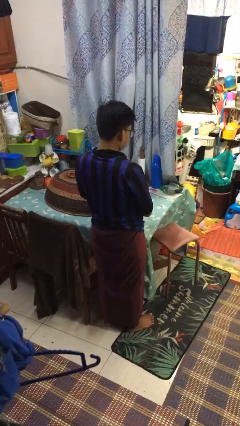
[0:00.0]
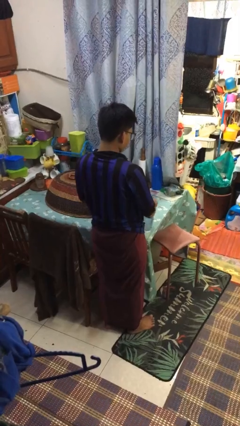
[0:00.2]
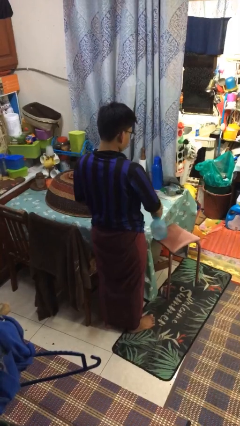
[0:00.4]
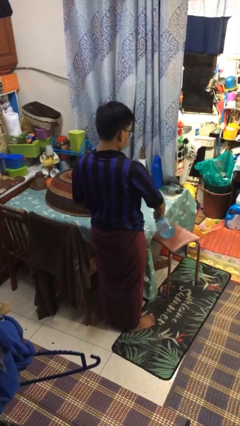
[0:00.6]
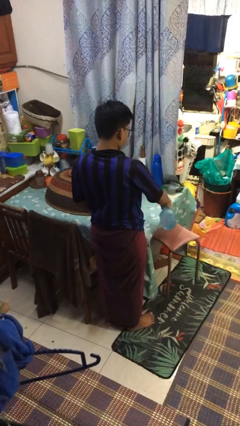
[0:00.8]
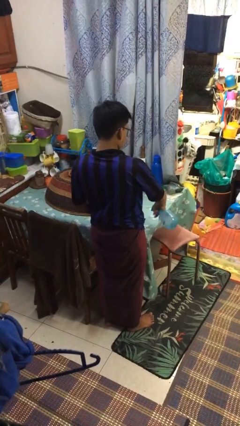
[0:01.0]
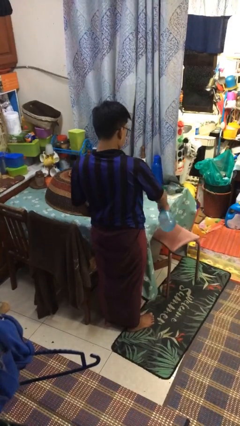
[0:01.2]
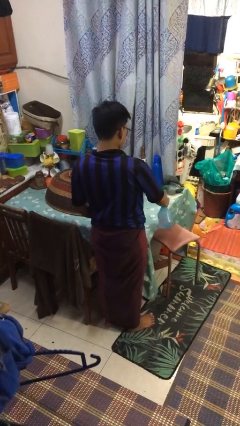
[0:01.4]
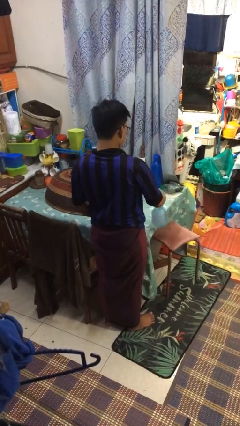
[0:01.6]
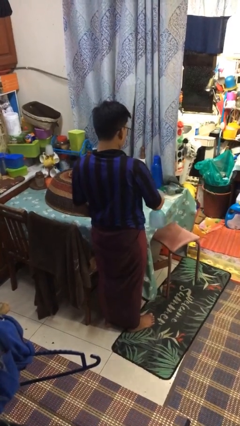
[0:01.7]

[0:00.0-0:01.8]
person sprays from bottle

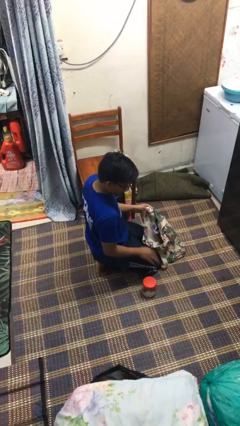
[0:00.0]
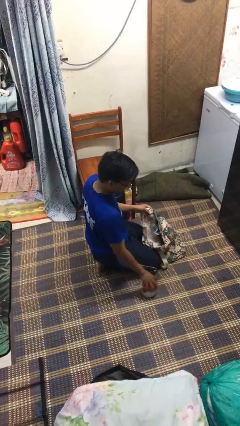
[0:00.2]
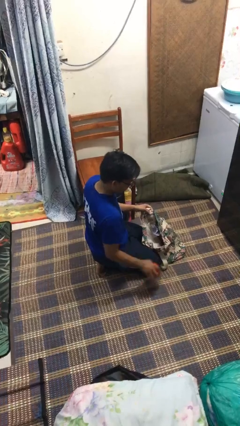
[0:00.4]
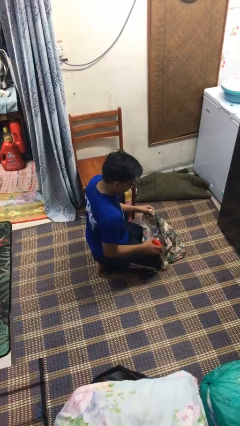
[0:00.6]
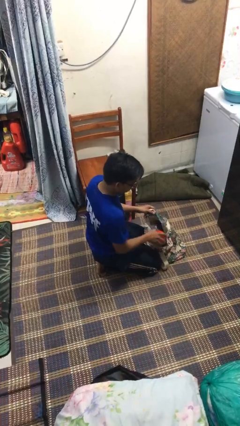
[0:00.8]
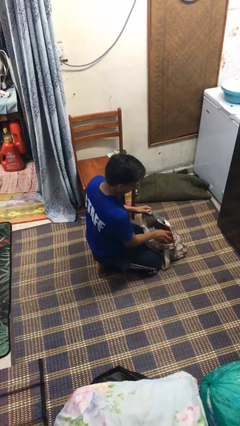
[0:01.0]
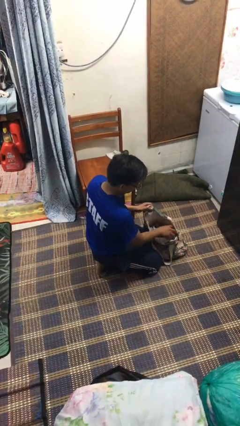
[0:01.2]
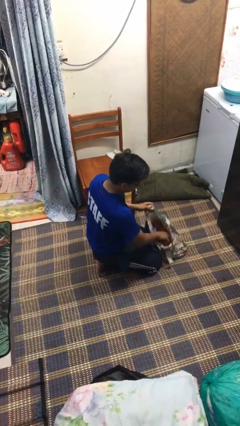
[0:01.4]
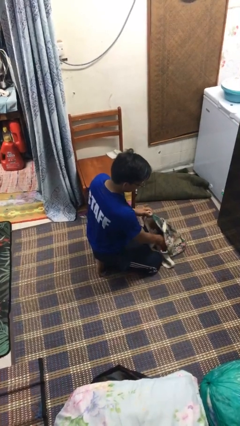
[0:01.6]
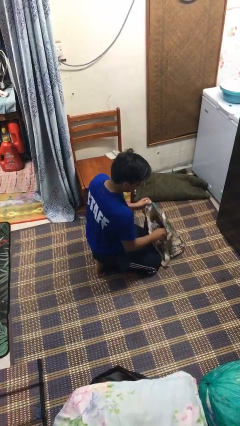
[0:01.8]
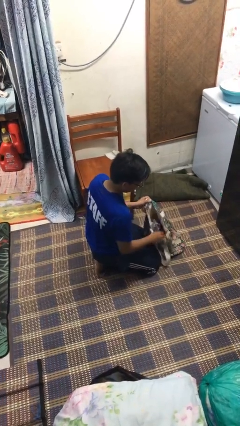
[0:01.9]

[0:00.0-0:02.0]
person puts object into bag

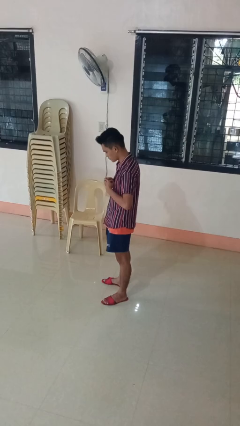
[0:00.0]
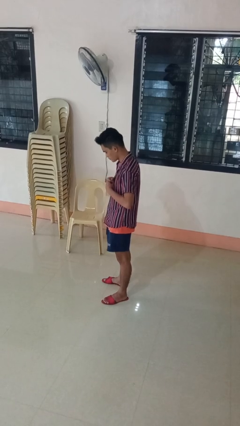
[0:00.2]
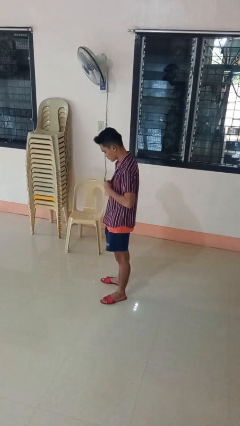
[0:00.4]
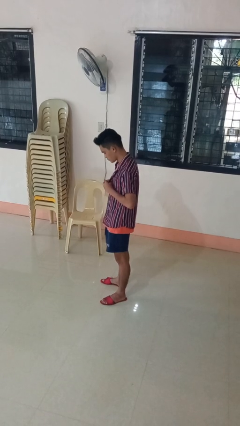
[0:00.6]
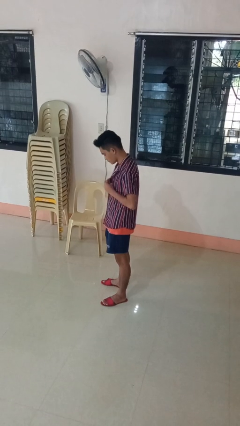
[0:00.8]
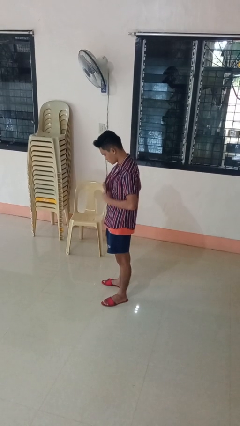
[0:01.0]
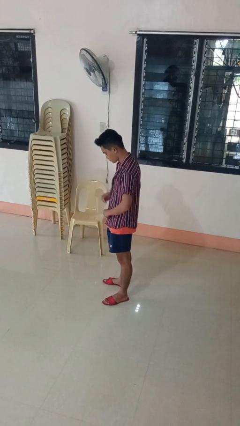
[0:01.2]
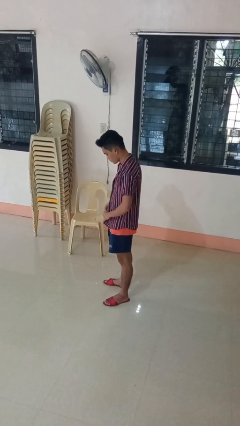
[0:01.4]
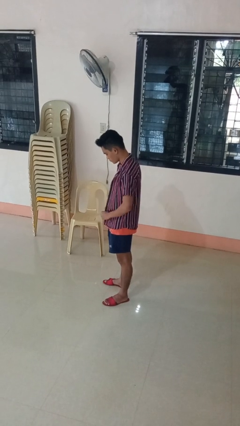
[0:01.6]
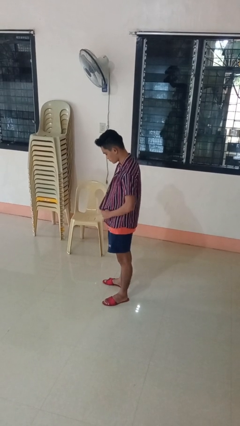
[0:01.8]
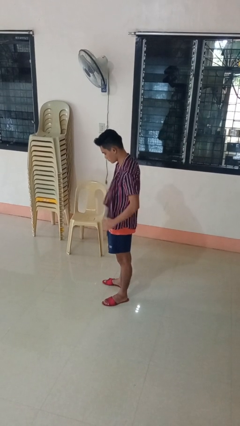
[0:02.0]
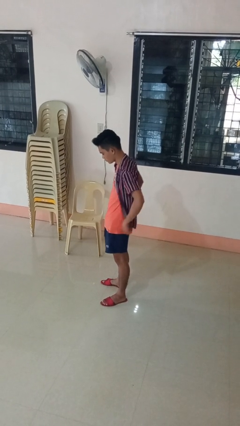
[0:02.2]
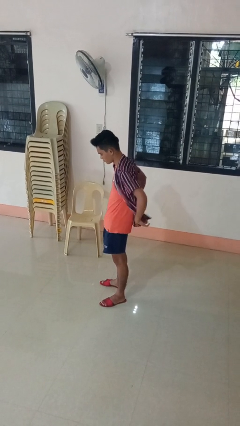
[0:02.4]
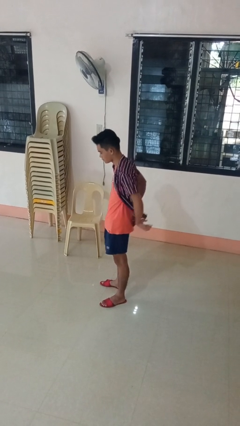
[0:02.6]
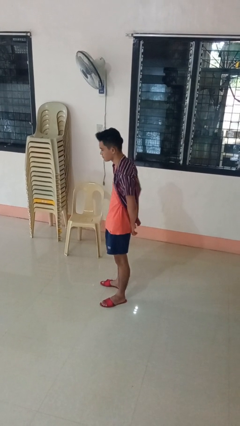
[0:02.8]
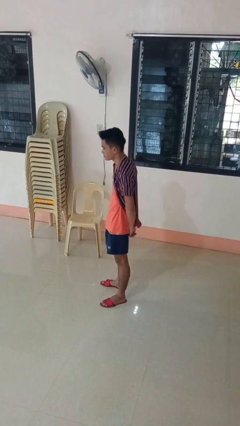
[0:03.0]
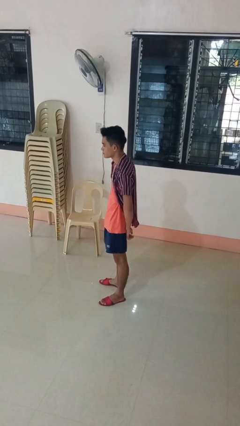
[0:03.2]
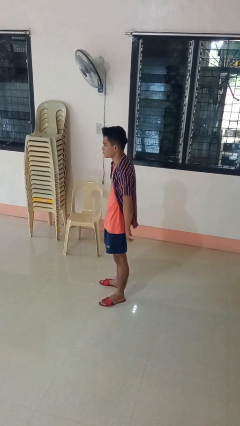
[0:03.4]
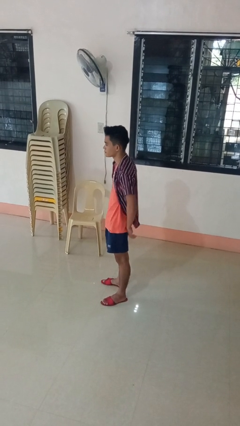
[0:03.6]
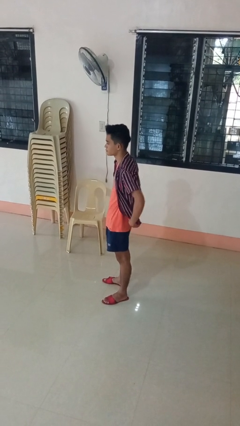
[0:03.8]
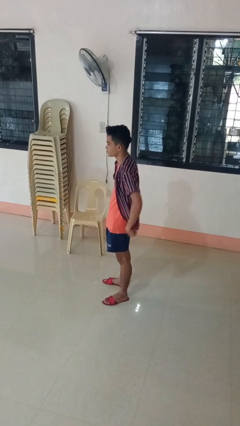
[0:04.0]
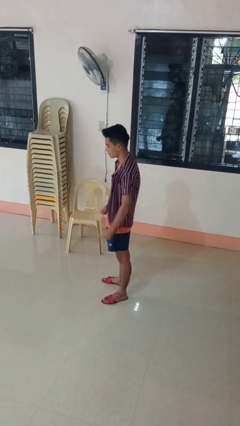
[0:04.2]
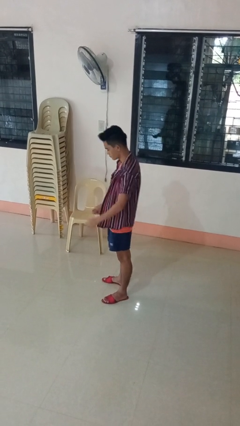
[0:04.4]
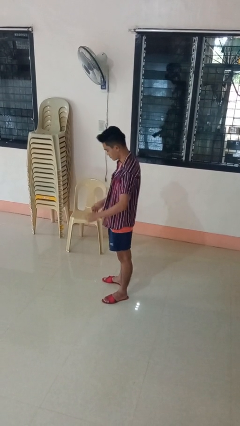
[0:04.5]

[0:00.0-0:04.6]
person unbuttons shirt

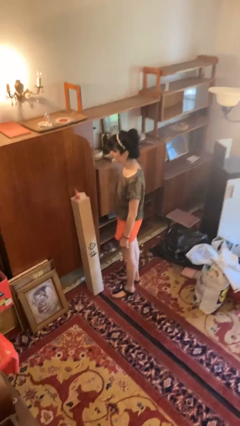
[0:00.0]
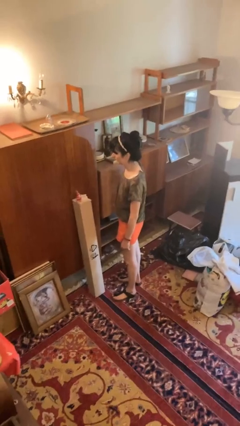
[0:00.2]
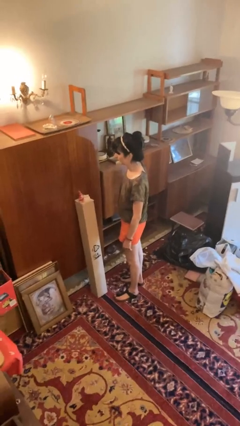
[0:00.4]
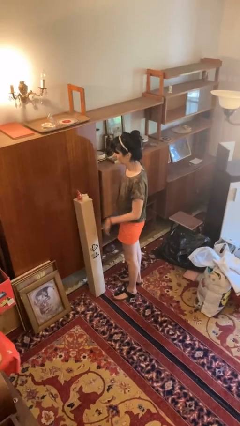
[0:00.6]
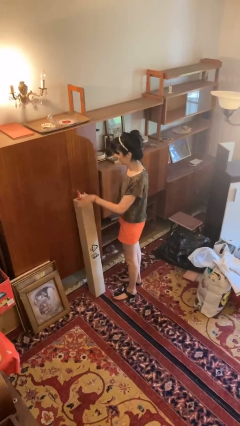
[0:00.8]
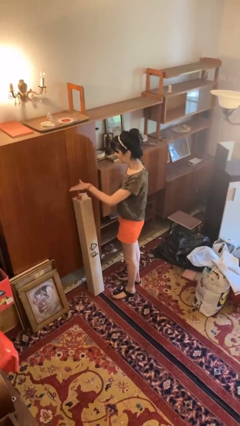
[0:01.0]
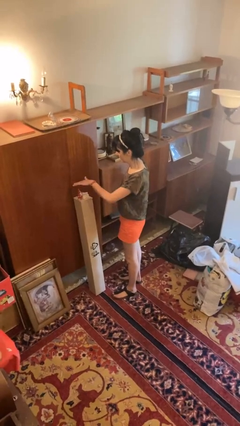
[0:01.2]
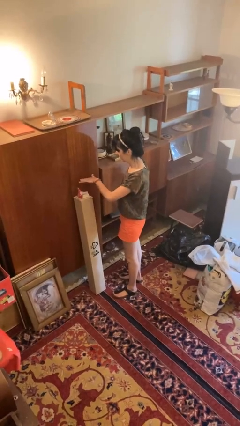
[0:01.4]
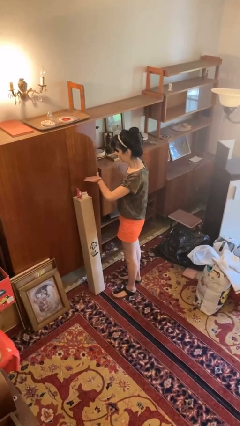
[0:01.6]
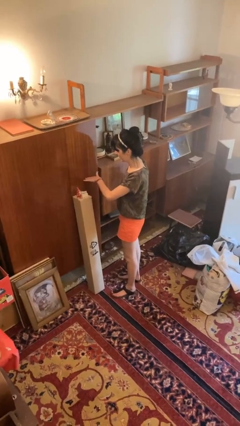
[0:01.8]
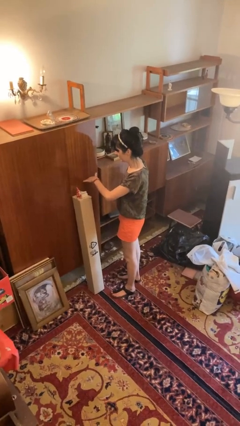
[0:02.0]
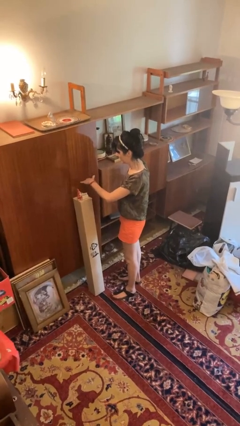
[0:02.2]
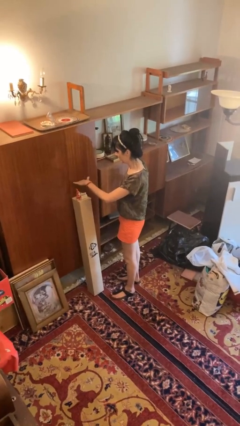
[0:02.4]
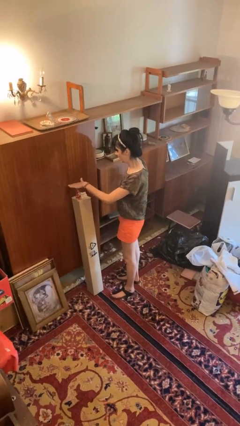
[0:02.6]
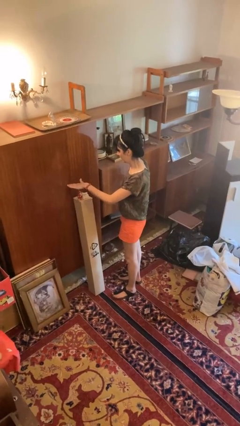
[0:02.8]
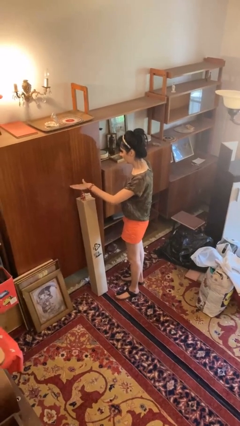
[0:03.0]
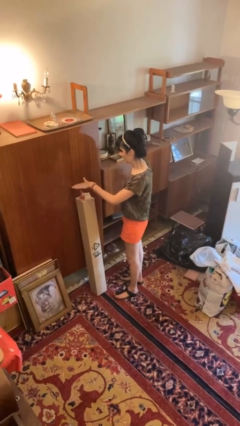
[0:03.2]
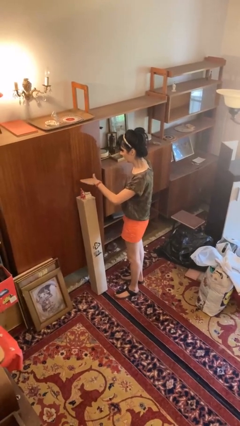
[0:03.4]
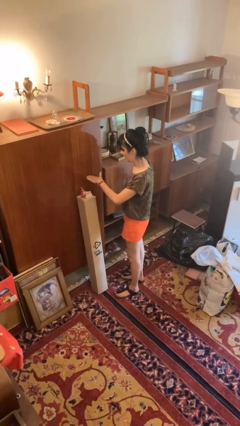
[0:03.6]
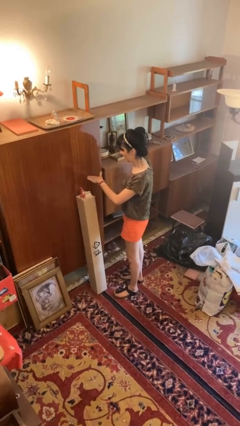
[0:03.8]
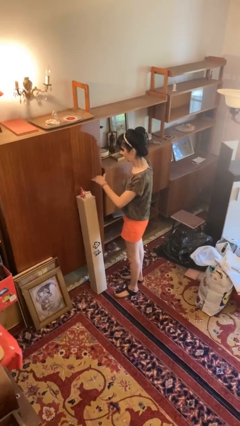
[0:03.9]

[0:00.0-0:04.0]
person waves hand over object

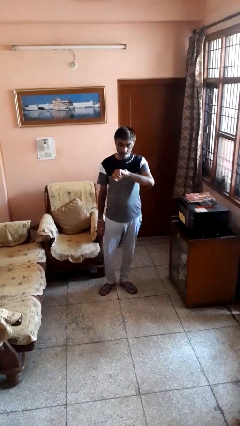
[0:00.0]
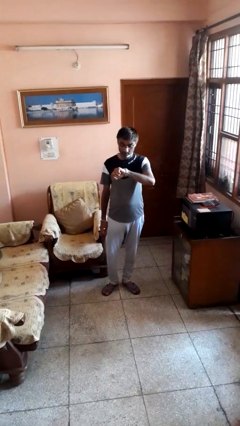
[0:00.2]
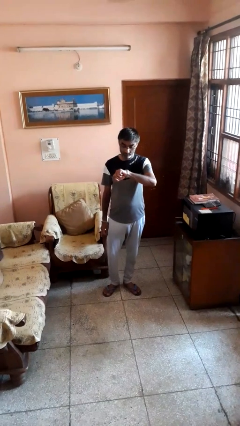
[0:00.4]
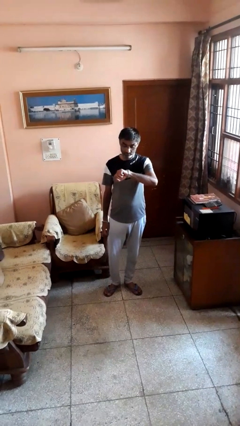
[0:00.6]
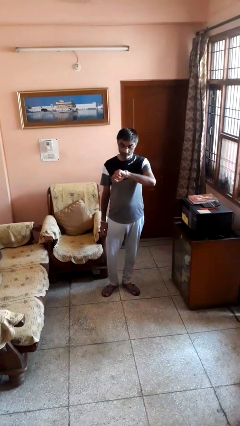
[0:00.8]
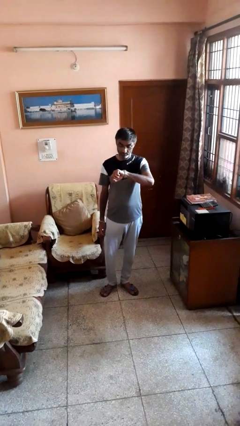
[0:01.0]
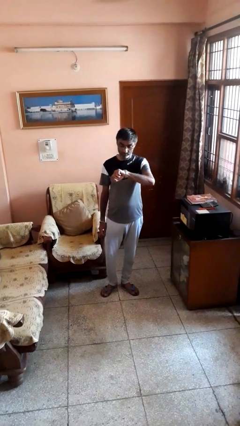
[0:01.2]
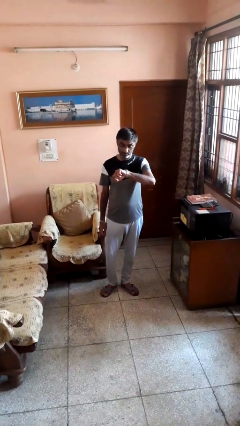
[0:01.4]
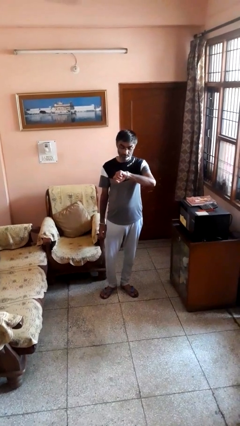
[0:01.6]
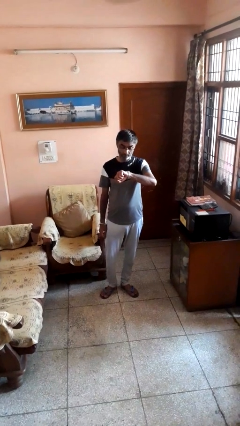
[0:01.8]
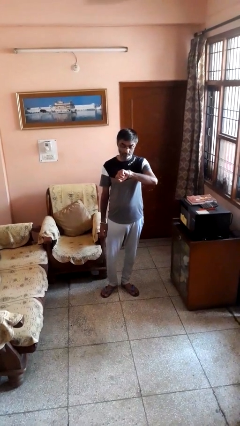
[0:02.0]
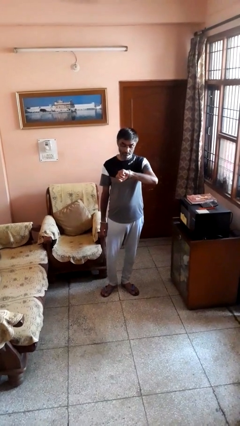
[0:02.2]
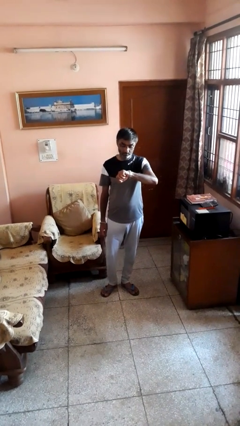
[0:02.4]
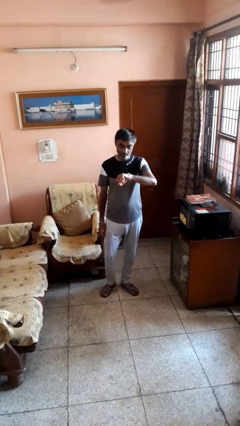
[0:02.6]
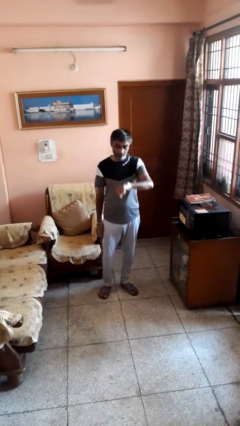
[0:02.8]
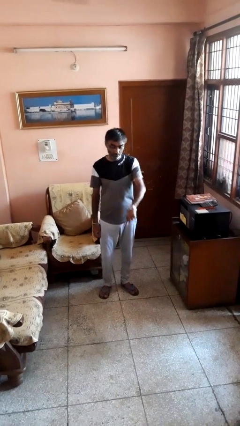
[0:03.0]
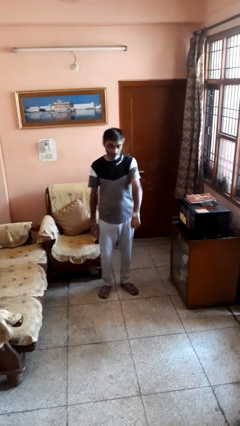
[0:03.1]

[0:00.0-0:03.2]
person looks at wristwatch

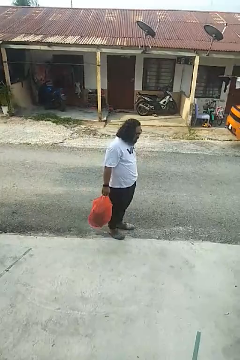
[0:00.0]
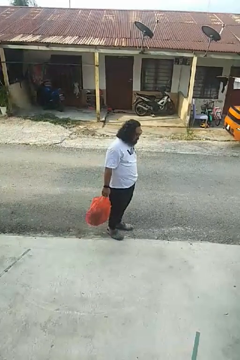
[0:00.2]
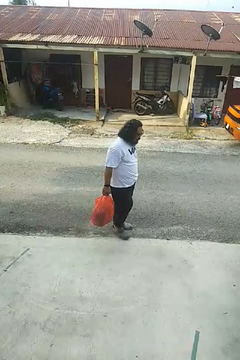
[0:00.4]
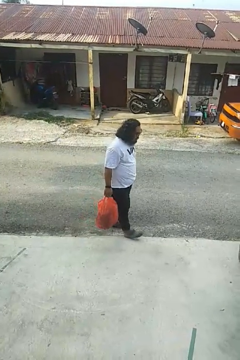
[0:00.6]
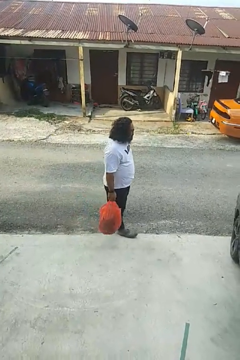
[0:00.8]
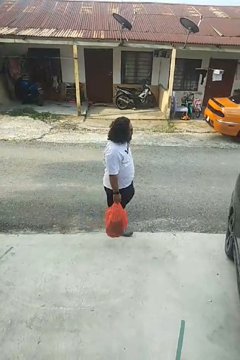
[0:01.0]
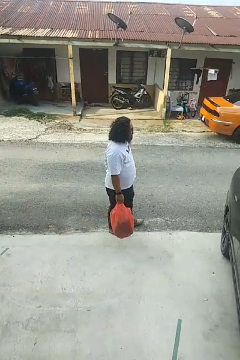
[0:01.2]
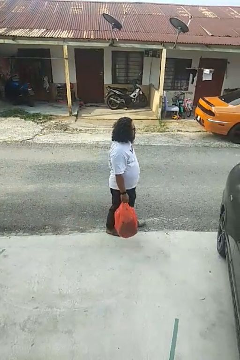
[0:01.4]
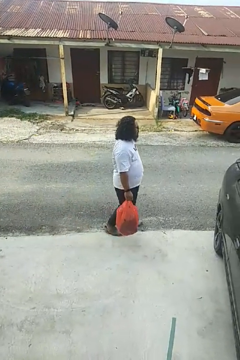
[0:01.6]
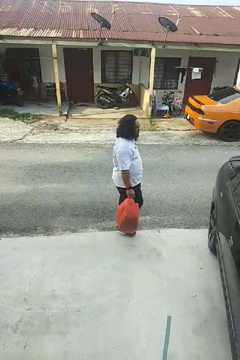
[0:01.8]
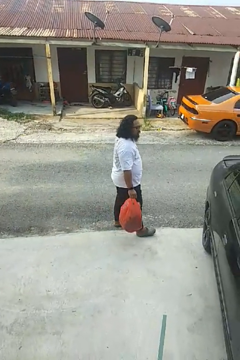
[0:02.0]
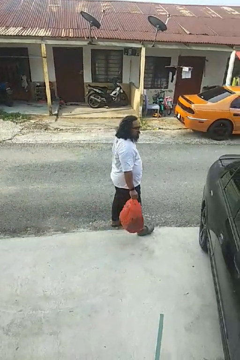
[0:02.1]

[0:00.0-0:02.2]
person carries groceries

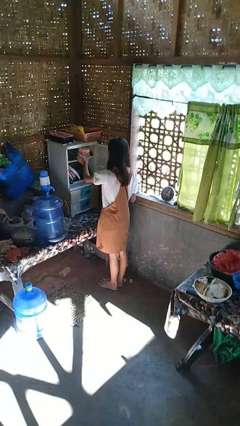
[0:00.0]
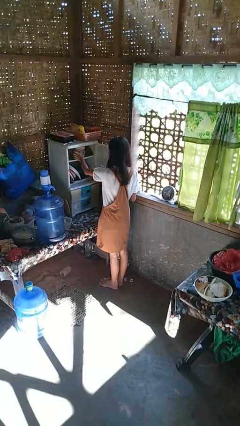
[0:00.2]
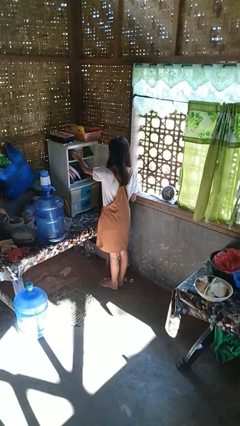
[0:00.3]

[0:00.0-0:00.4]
person puts down object into cabinet
